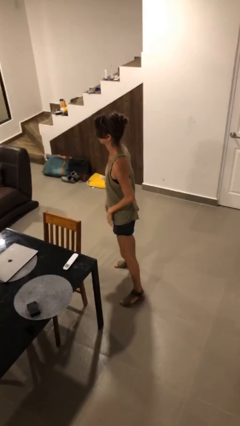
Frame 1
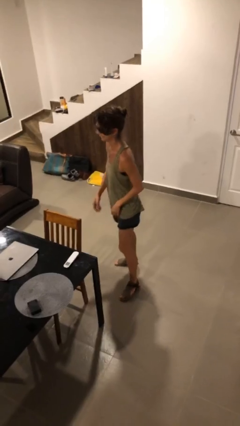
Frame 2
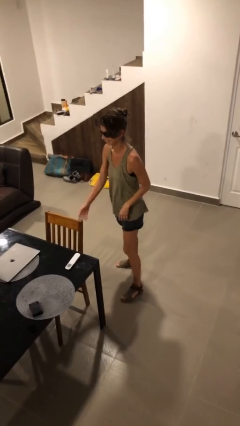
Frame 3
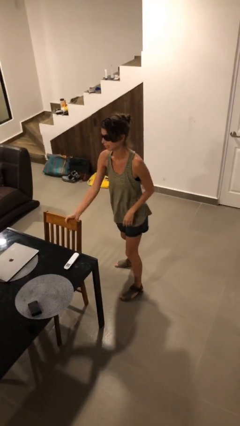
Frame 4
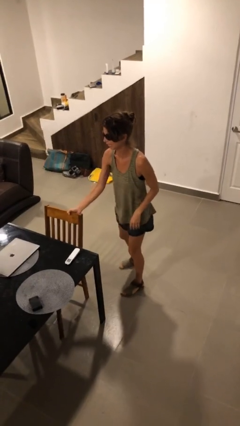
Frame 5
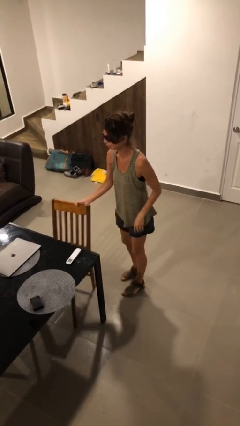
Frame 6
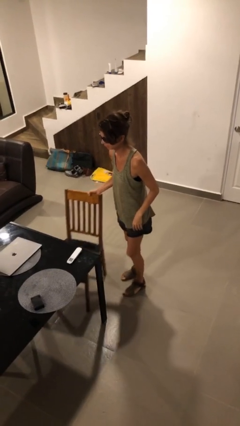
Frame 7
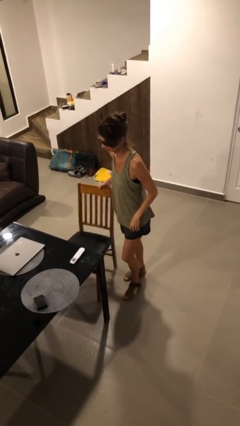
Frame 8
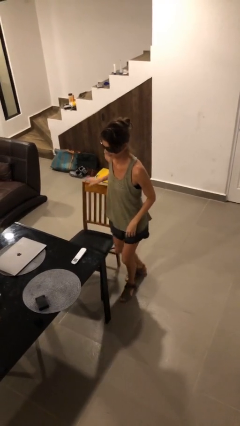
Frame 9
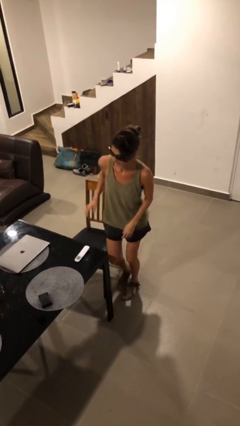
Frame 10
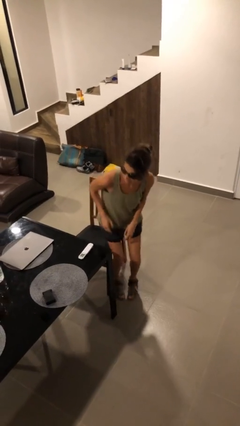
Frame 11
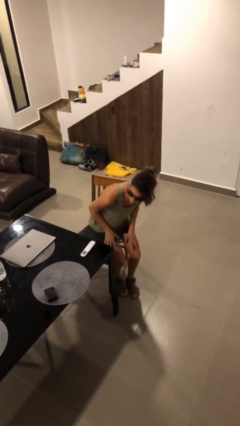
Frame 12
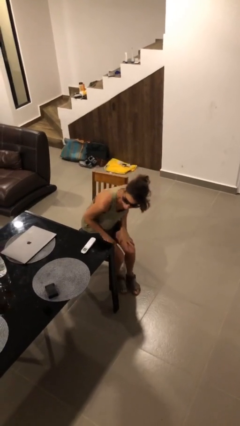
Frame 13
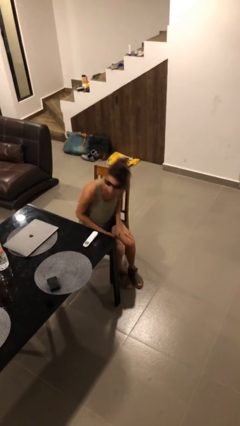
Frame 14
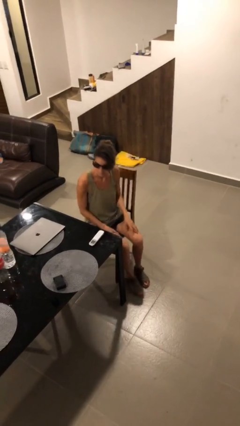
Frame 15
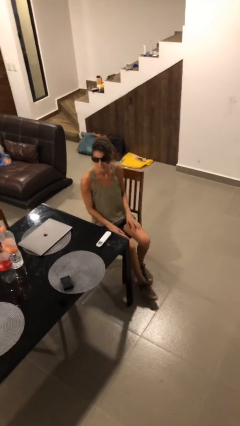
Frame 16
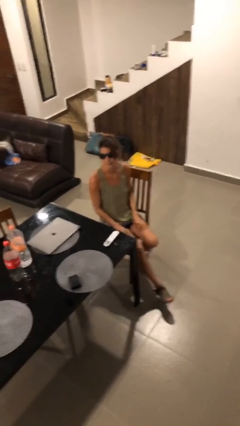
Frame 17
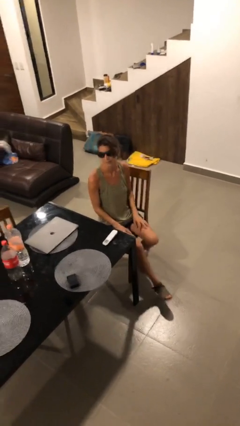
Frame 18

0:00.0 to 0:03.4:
person sits down

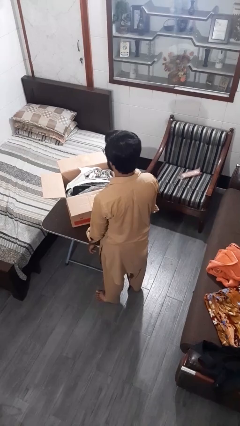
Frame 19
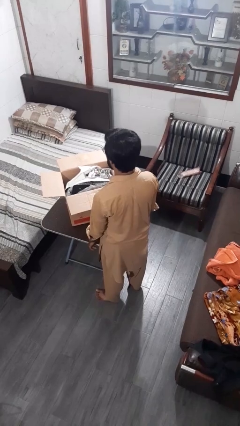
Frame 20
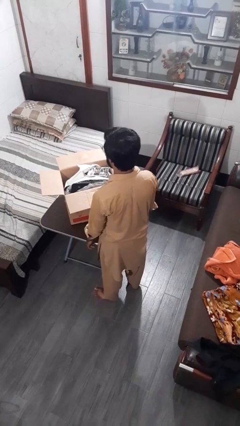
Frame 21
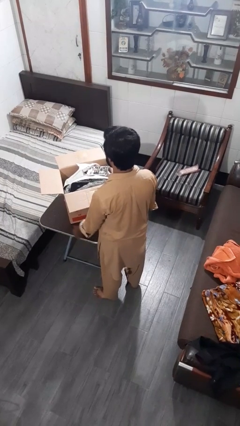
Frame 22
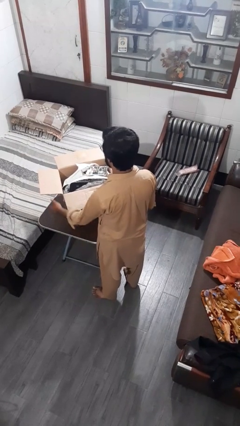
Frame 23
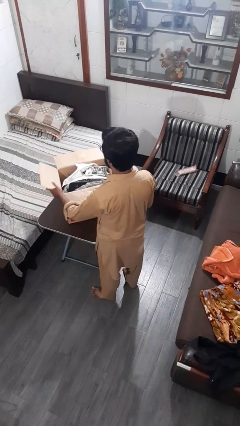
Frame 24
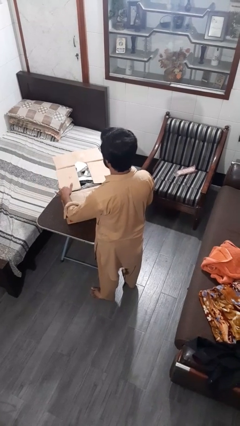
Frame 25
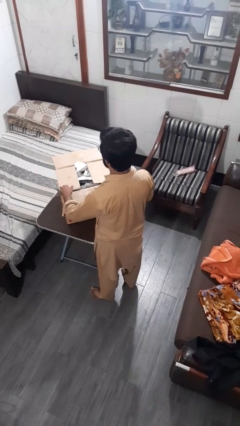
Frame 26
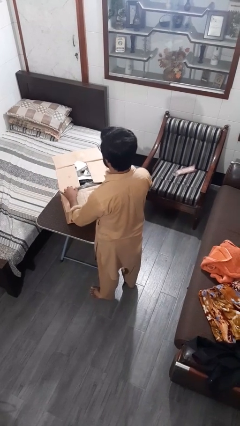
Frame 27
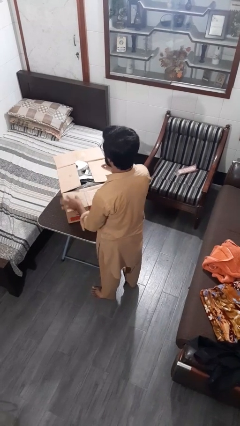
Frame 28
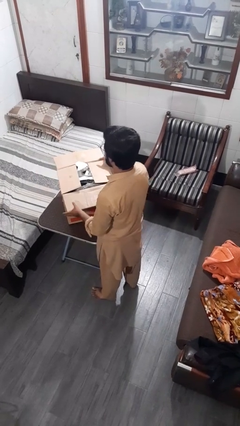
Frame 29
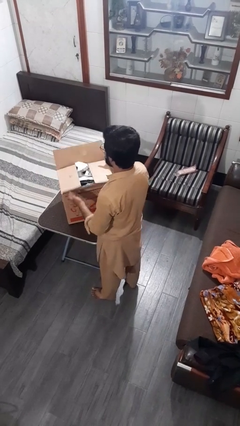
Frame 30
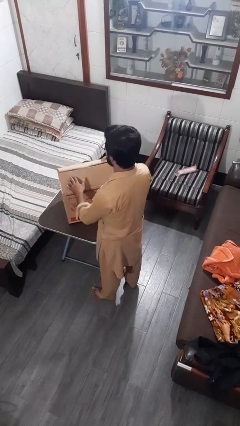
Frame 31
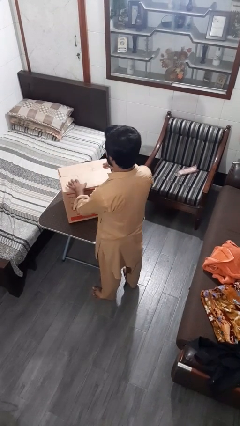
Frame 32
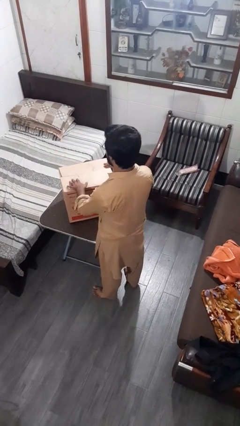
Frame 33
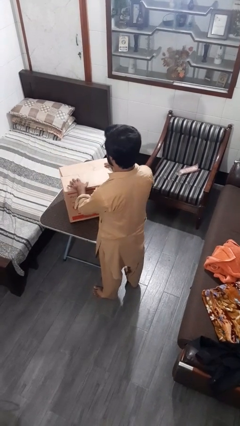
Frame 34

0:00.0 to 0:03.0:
person closes box

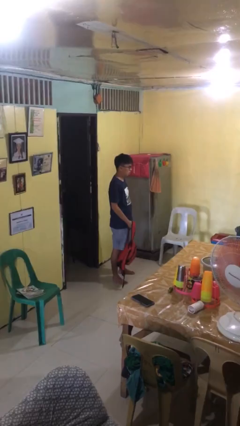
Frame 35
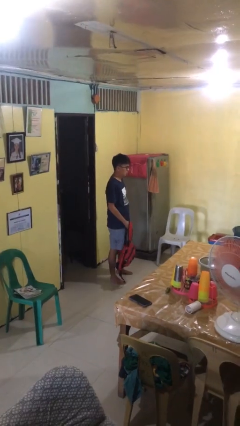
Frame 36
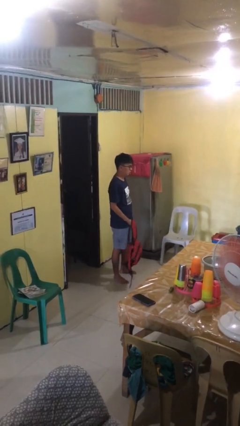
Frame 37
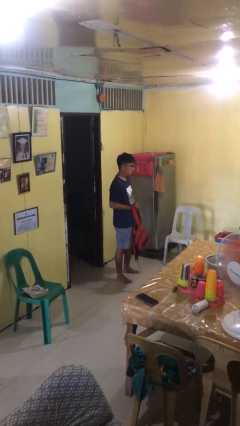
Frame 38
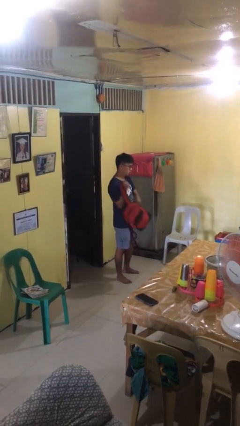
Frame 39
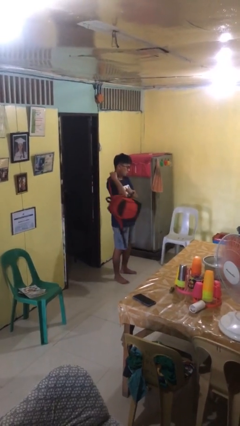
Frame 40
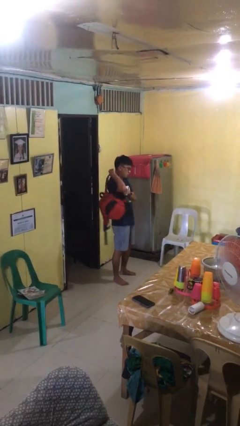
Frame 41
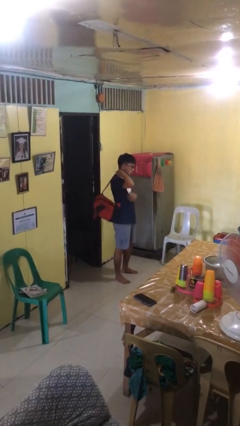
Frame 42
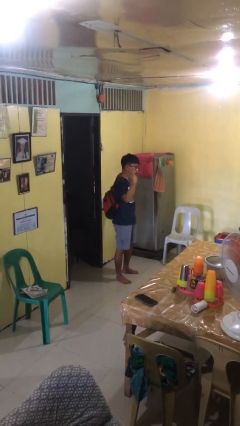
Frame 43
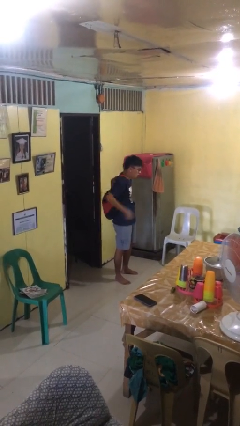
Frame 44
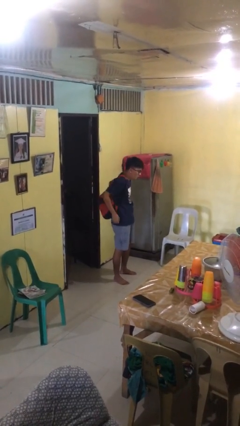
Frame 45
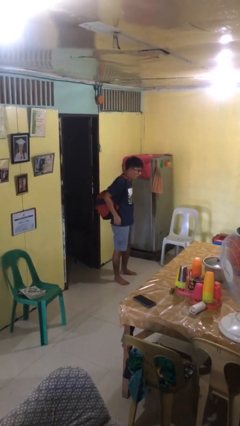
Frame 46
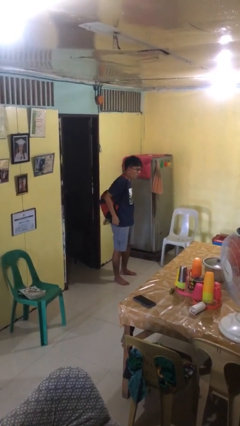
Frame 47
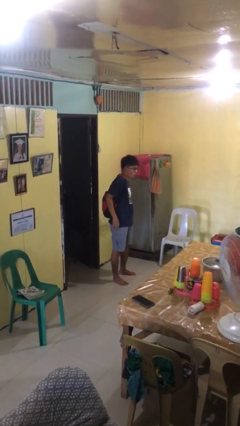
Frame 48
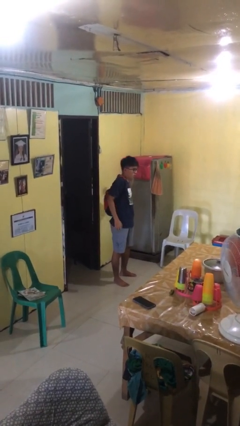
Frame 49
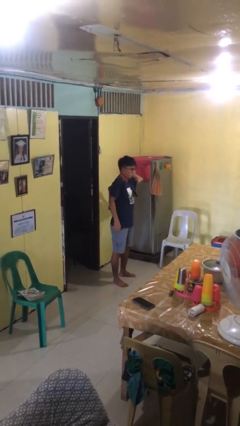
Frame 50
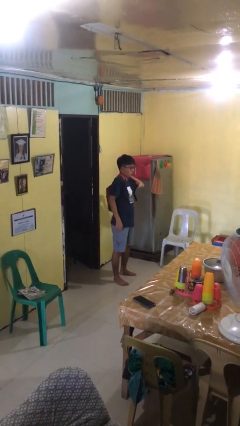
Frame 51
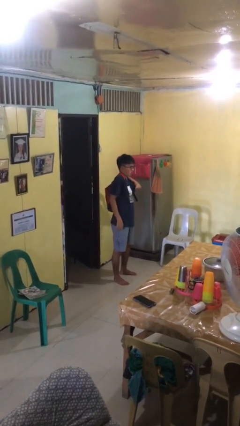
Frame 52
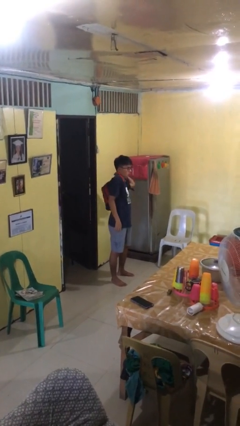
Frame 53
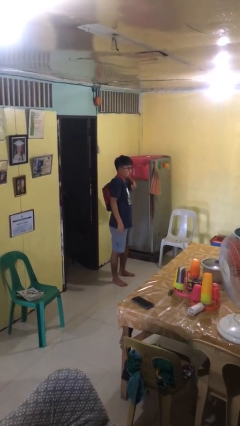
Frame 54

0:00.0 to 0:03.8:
person puts on backpack

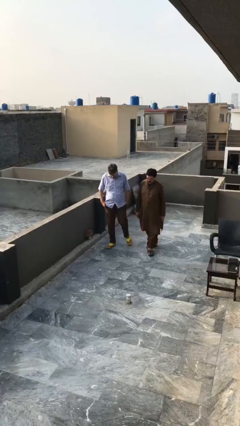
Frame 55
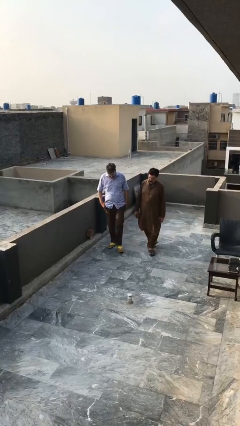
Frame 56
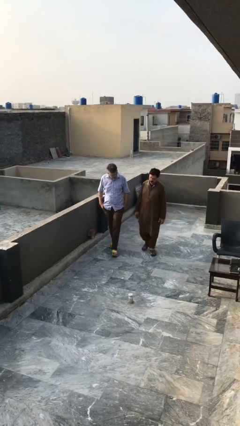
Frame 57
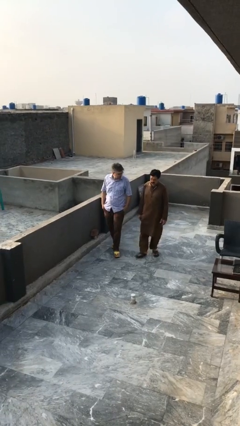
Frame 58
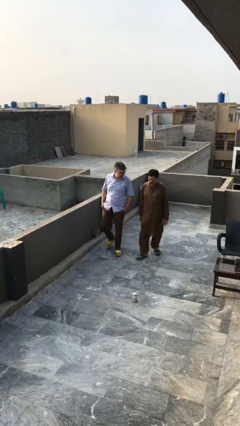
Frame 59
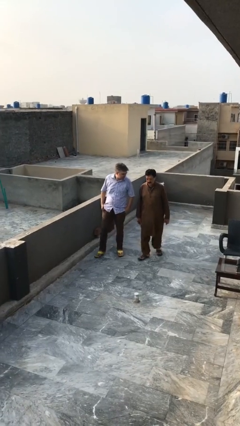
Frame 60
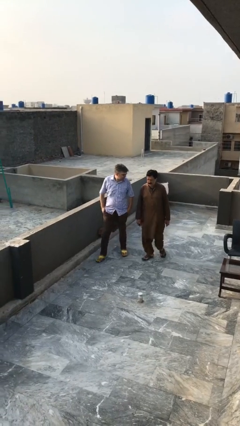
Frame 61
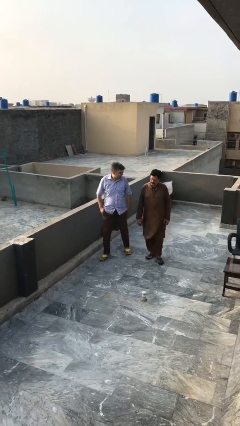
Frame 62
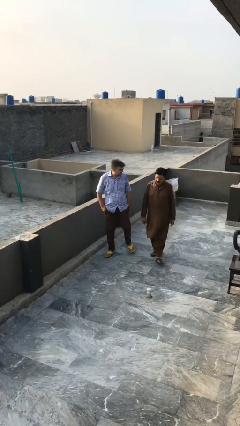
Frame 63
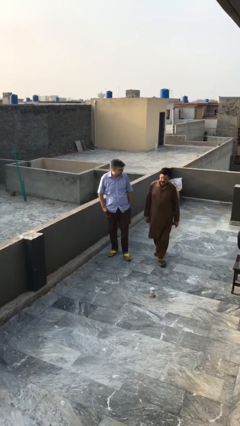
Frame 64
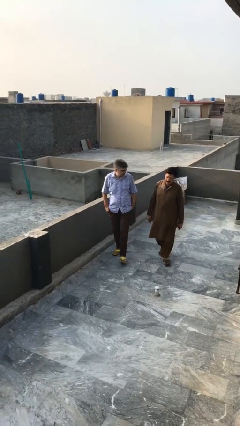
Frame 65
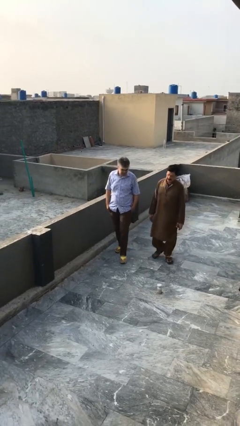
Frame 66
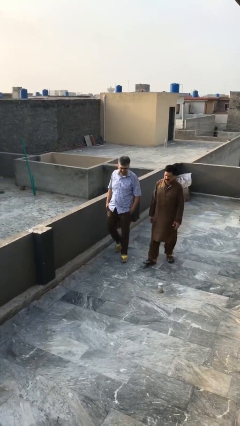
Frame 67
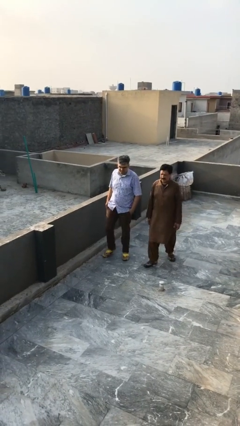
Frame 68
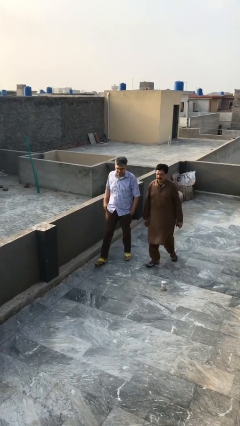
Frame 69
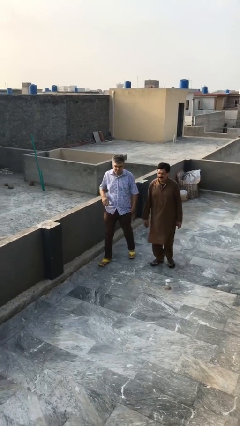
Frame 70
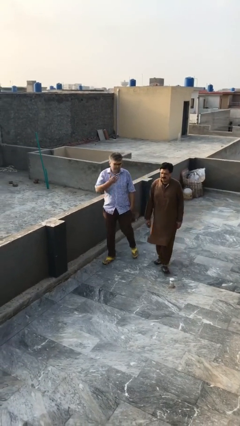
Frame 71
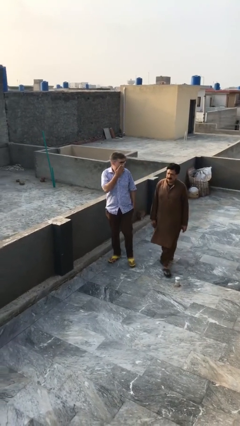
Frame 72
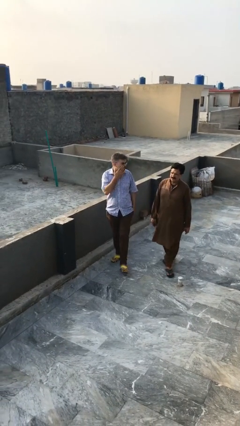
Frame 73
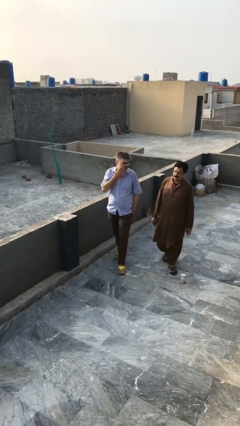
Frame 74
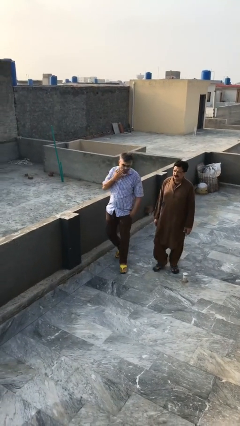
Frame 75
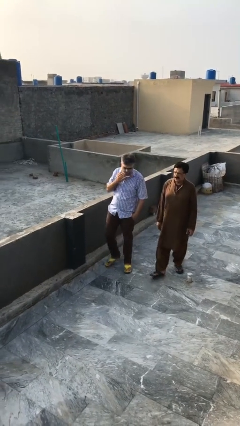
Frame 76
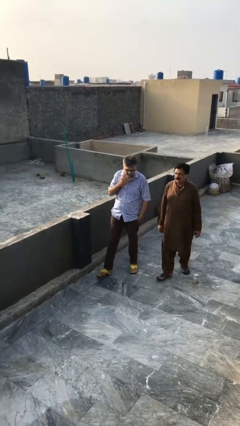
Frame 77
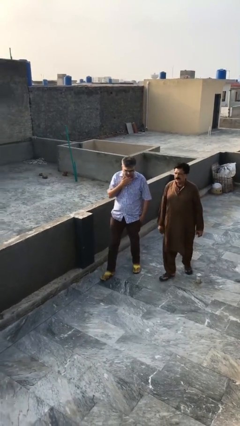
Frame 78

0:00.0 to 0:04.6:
person talks to person

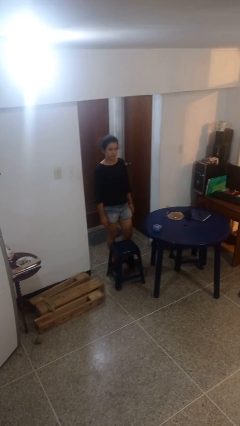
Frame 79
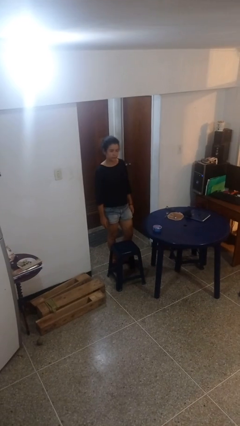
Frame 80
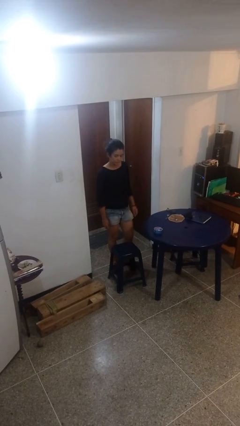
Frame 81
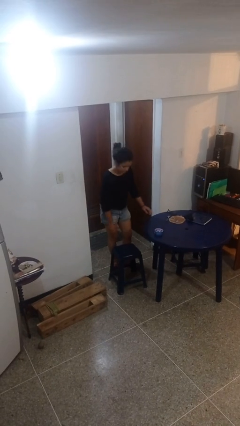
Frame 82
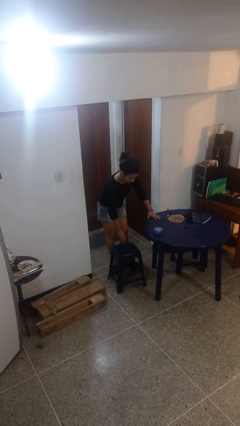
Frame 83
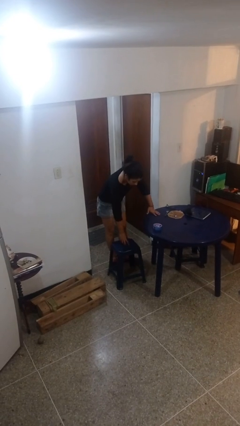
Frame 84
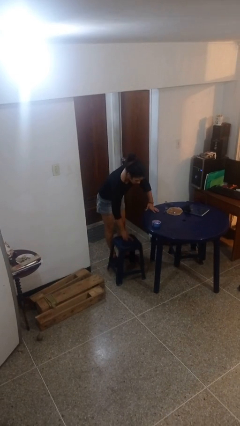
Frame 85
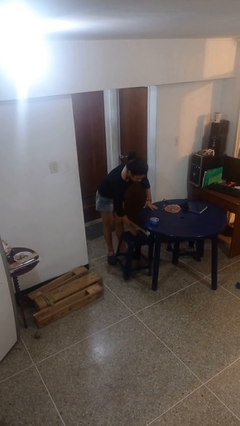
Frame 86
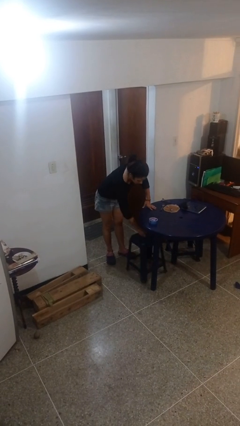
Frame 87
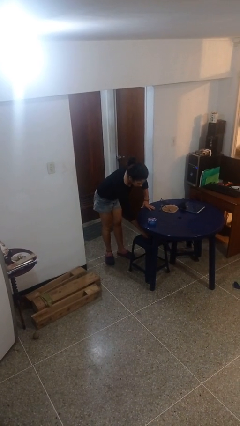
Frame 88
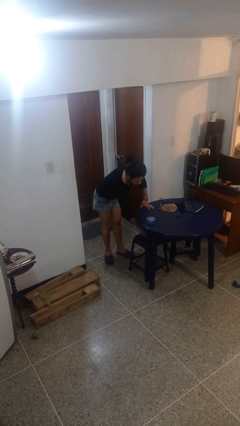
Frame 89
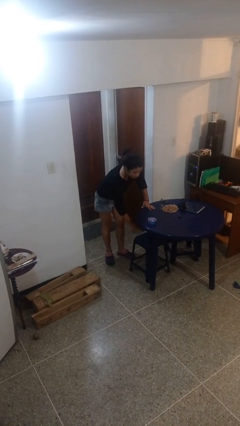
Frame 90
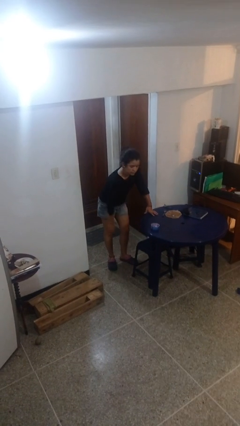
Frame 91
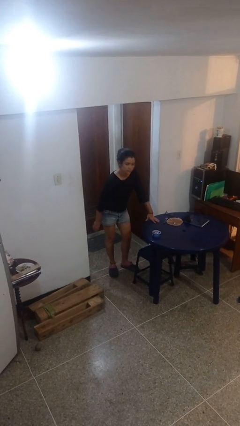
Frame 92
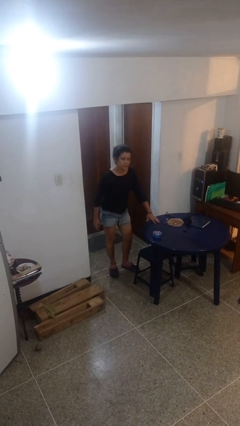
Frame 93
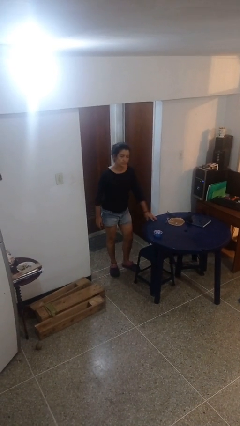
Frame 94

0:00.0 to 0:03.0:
person pushes in chair
